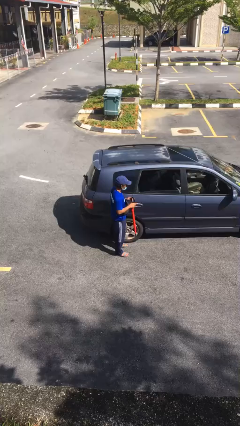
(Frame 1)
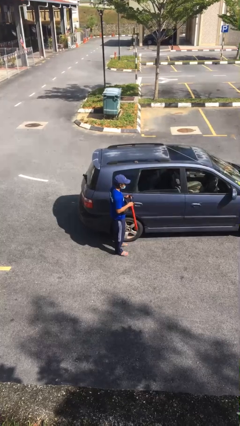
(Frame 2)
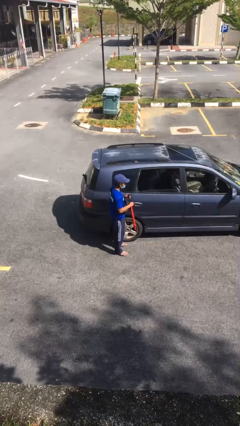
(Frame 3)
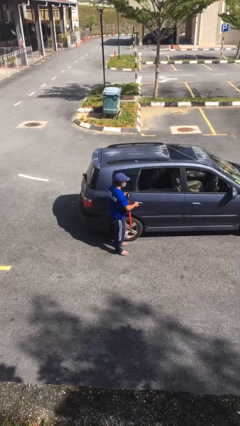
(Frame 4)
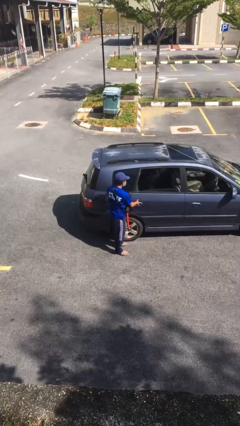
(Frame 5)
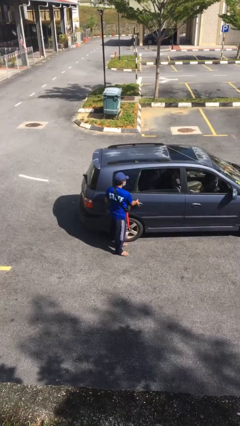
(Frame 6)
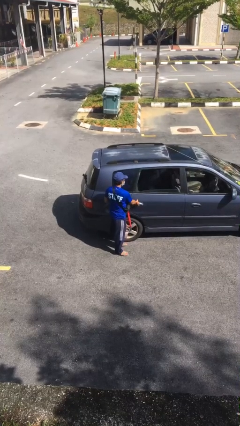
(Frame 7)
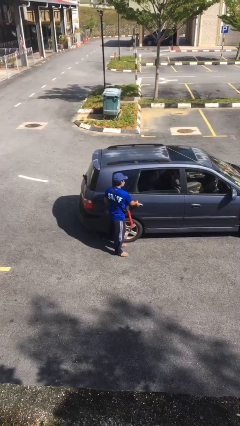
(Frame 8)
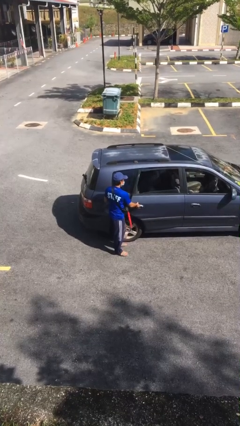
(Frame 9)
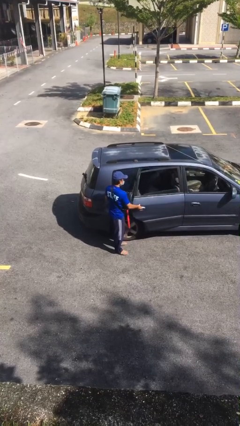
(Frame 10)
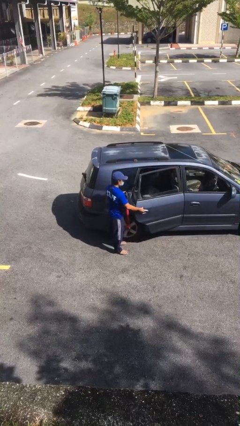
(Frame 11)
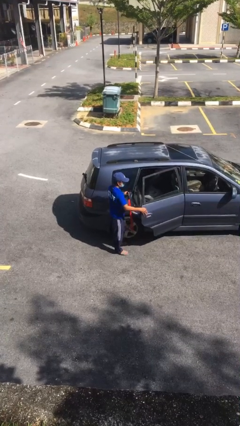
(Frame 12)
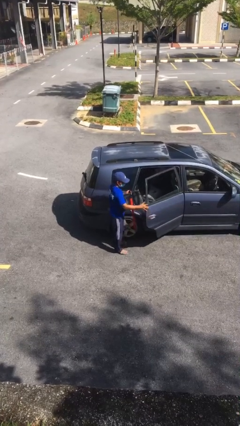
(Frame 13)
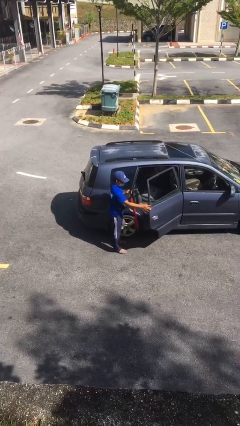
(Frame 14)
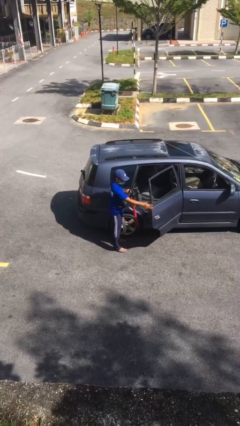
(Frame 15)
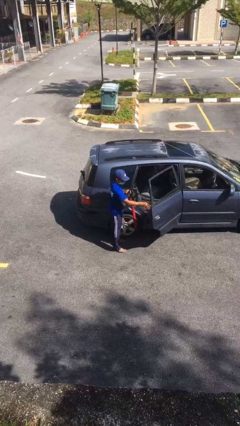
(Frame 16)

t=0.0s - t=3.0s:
person opens car door

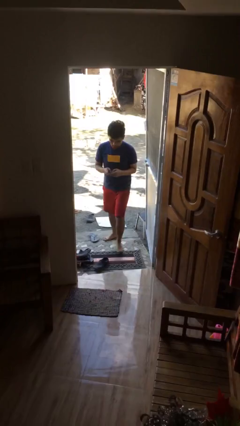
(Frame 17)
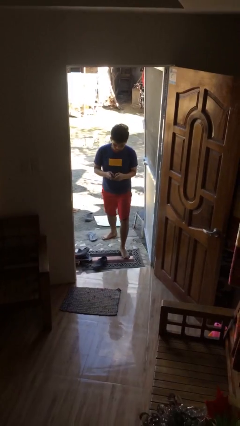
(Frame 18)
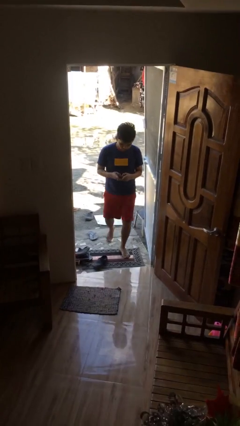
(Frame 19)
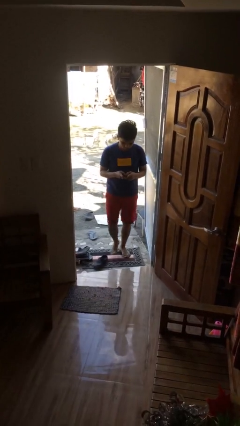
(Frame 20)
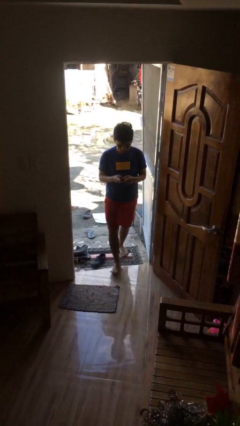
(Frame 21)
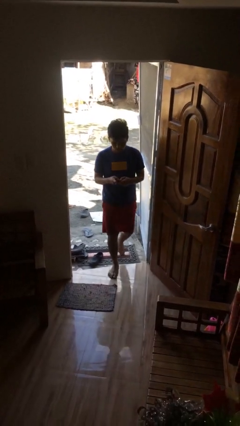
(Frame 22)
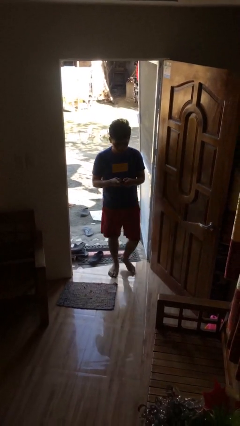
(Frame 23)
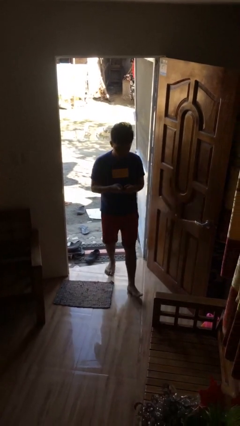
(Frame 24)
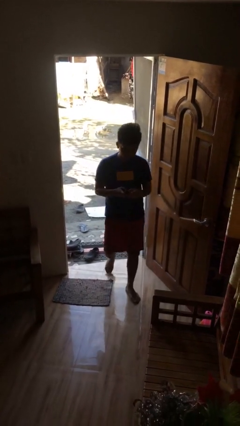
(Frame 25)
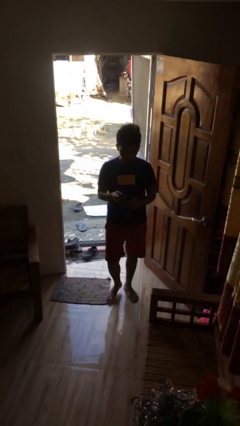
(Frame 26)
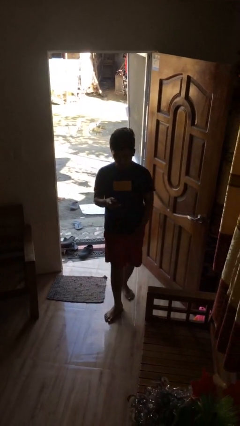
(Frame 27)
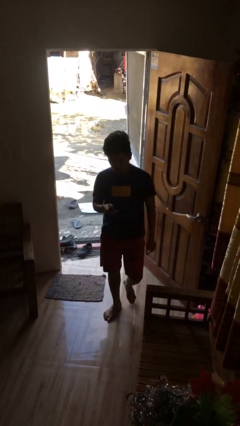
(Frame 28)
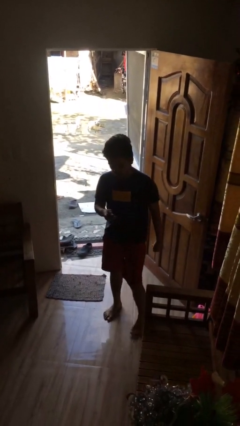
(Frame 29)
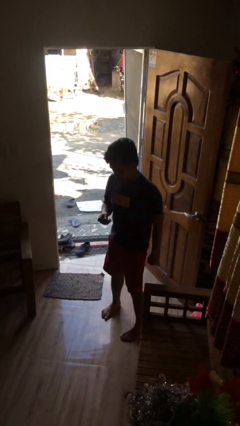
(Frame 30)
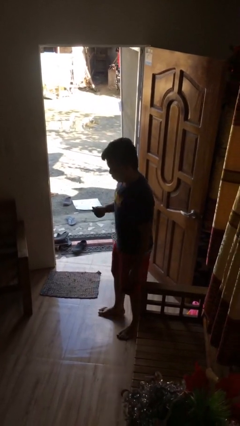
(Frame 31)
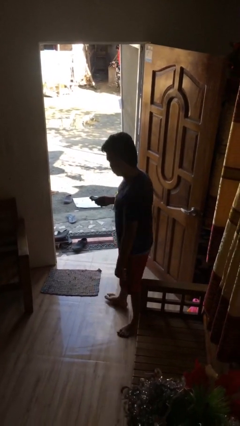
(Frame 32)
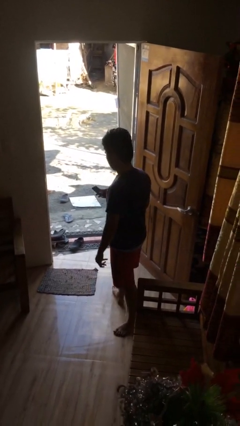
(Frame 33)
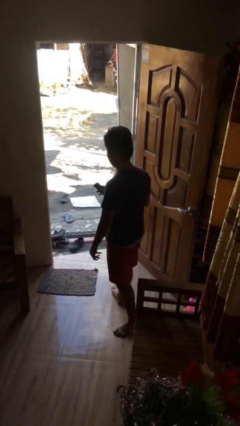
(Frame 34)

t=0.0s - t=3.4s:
person enters scene through structure

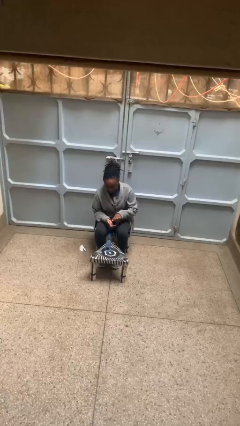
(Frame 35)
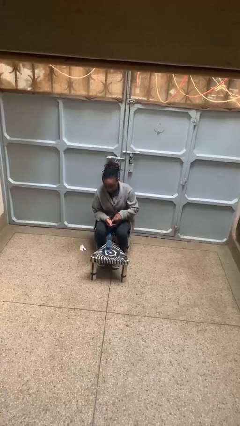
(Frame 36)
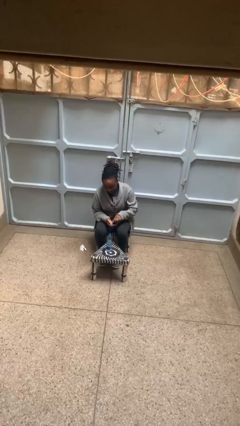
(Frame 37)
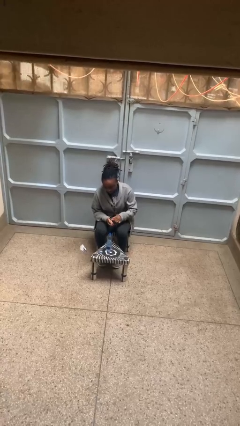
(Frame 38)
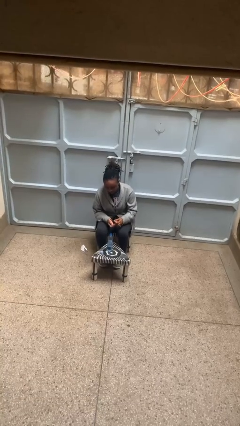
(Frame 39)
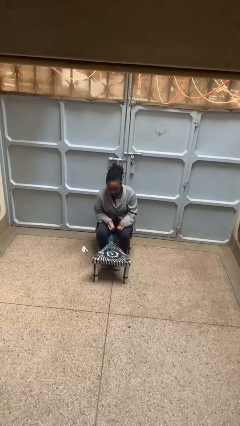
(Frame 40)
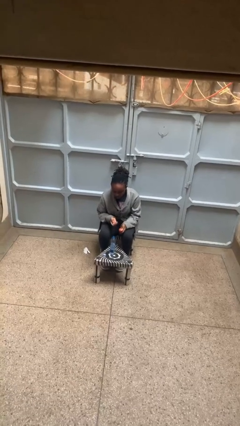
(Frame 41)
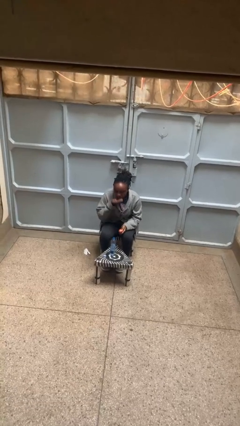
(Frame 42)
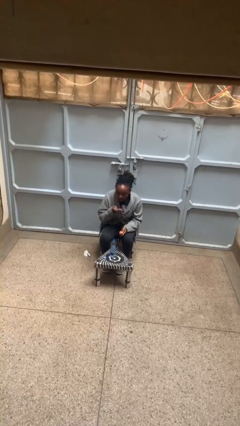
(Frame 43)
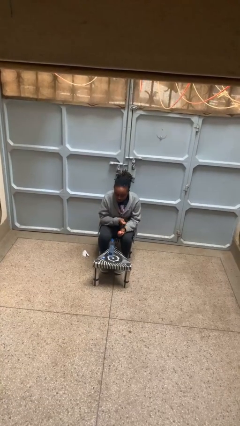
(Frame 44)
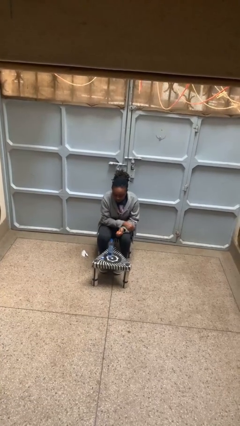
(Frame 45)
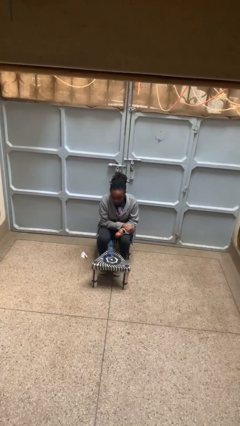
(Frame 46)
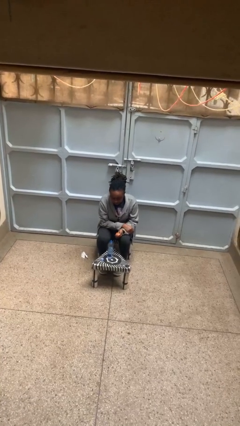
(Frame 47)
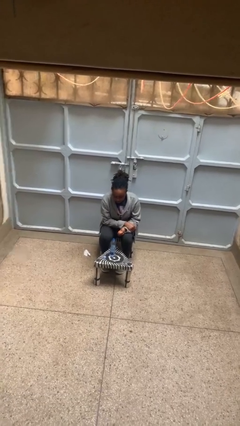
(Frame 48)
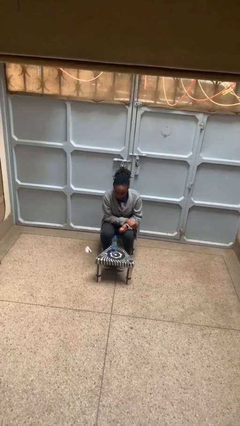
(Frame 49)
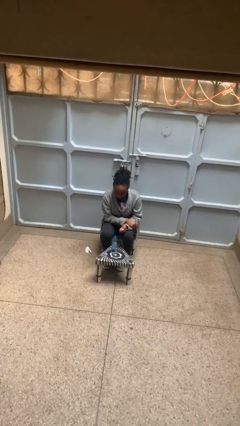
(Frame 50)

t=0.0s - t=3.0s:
person takes medicine pills

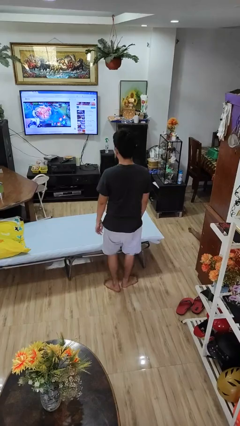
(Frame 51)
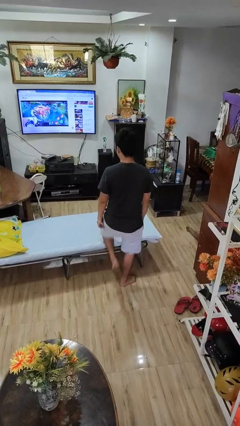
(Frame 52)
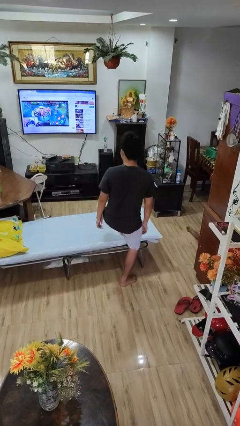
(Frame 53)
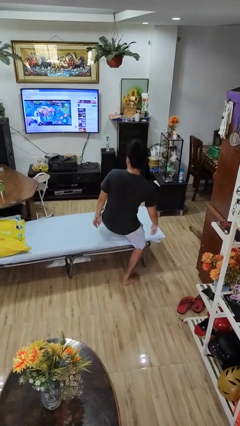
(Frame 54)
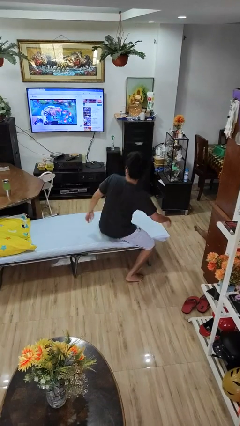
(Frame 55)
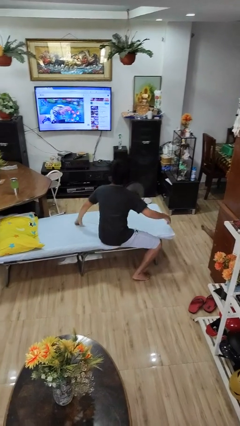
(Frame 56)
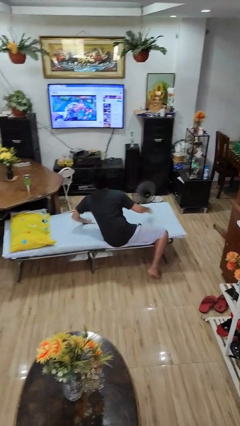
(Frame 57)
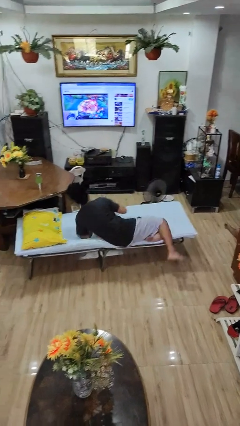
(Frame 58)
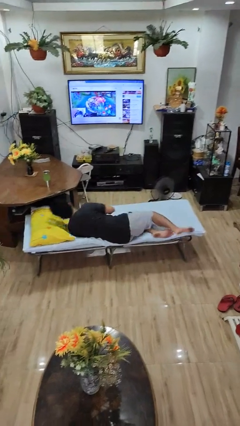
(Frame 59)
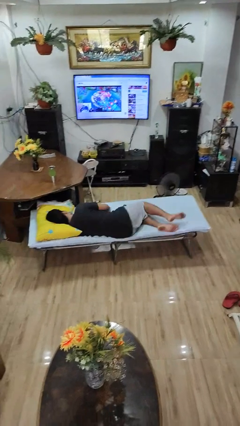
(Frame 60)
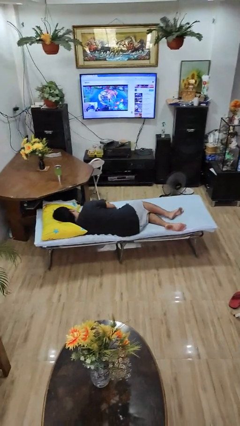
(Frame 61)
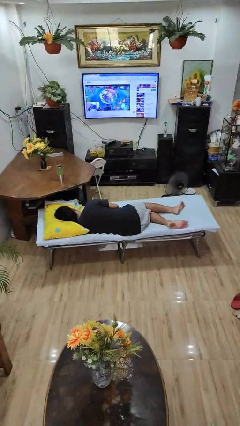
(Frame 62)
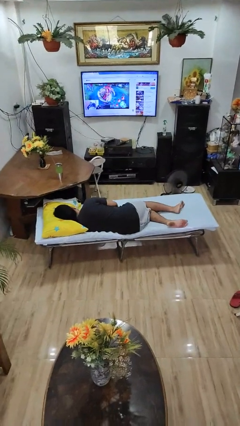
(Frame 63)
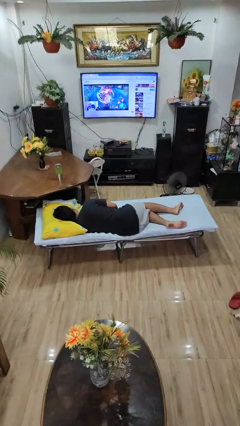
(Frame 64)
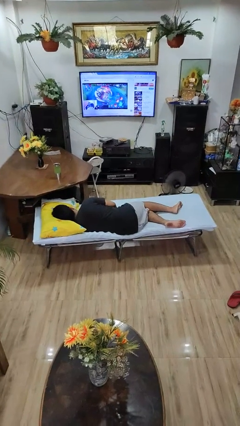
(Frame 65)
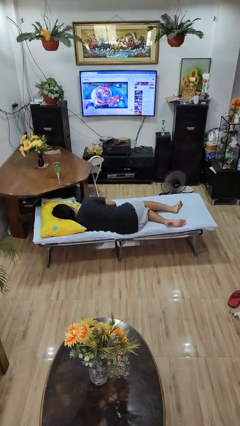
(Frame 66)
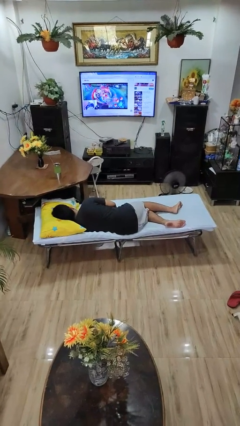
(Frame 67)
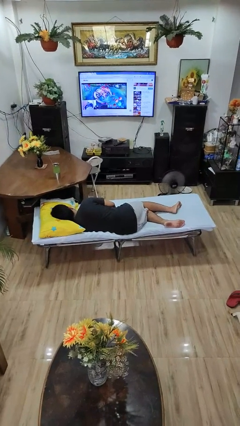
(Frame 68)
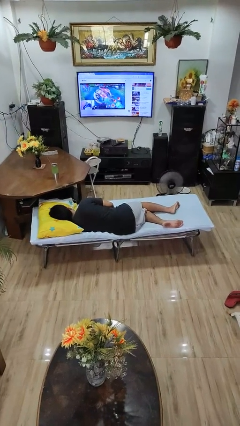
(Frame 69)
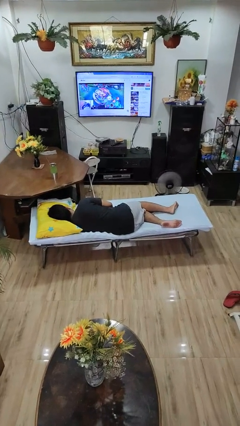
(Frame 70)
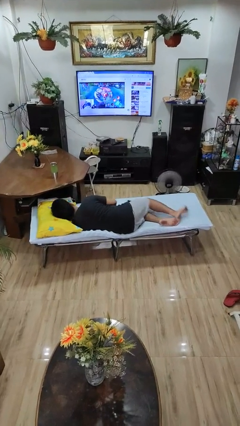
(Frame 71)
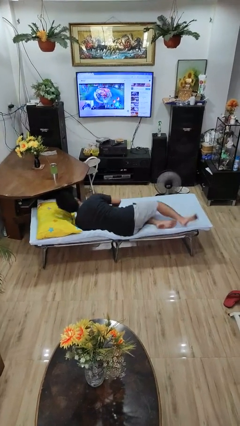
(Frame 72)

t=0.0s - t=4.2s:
person lies down on bed

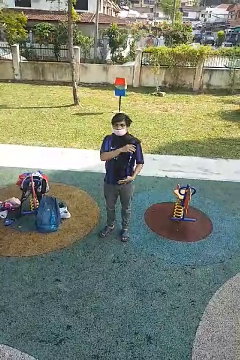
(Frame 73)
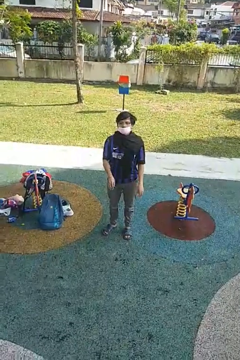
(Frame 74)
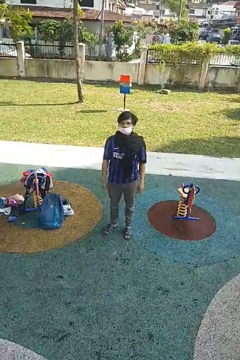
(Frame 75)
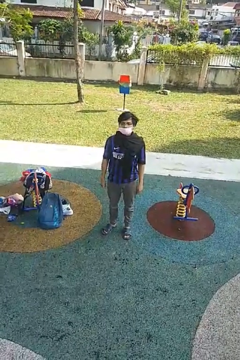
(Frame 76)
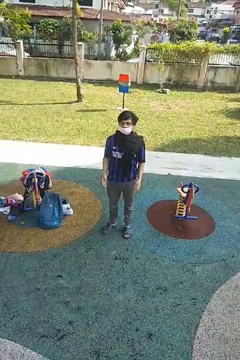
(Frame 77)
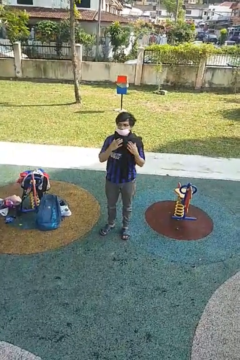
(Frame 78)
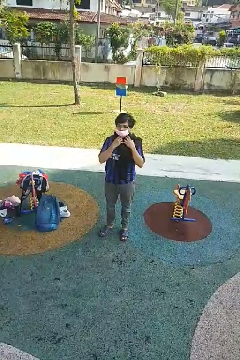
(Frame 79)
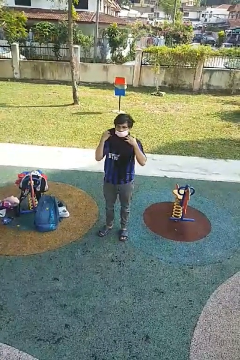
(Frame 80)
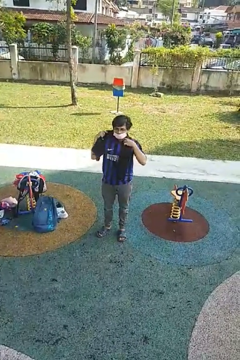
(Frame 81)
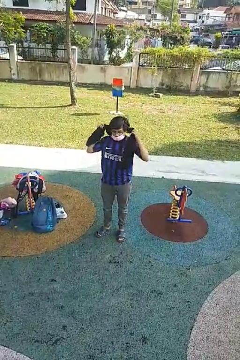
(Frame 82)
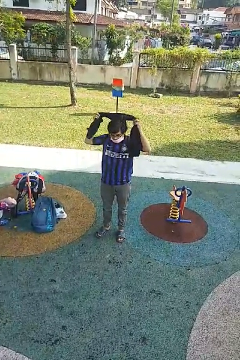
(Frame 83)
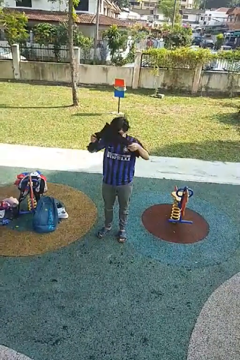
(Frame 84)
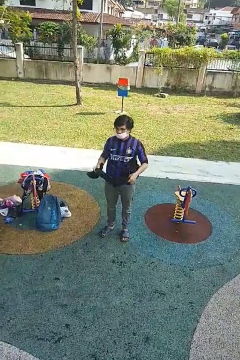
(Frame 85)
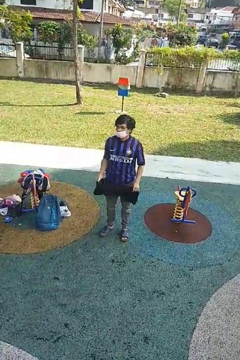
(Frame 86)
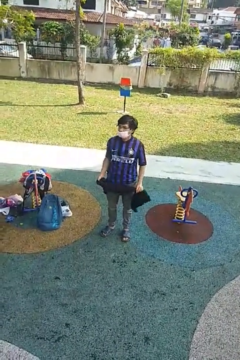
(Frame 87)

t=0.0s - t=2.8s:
person takes off scarf

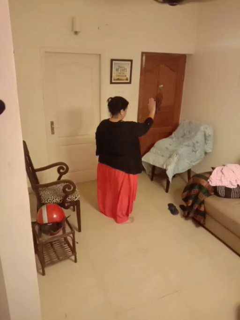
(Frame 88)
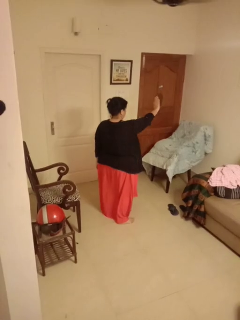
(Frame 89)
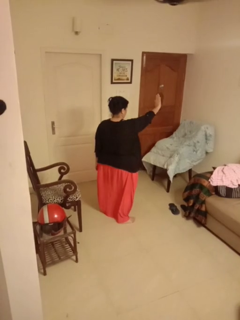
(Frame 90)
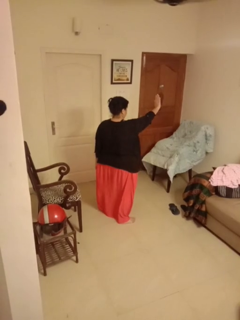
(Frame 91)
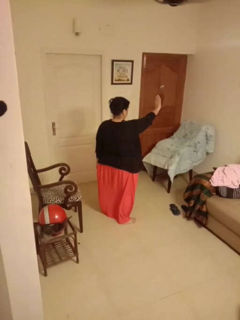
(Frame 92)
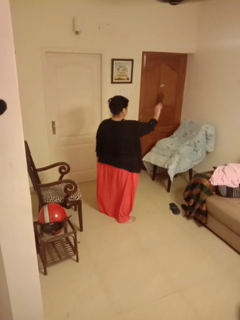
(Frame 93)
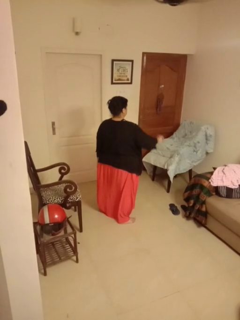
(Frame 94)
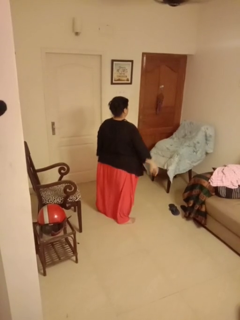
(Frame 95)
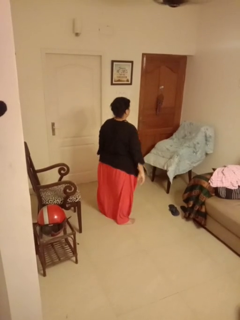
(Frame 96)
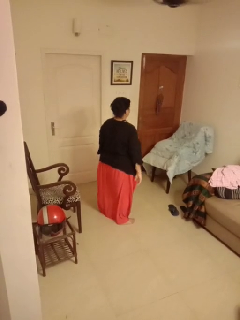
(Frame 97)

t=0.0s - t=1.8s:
person gestures stop
